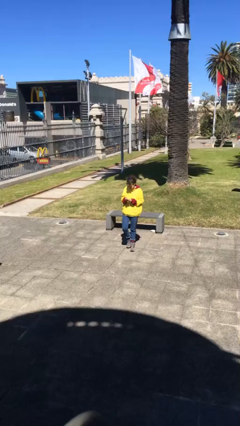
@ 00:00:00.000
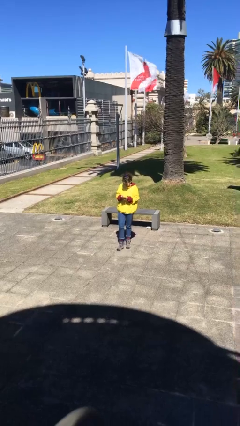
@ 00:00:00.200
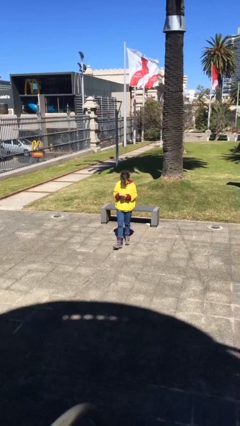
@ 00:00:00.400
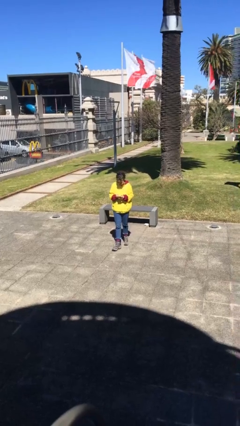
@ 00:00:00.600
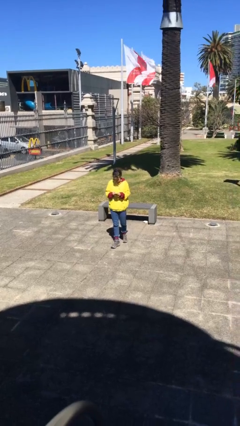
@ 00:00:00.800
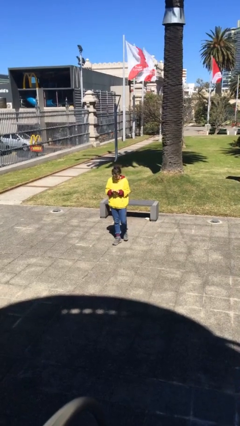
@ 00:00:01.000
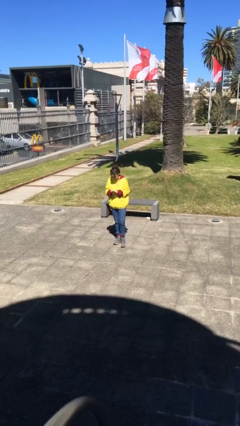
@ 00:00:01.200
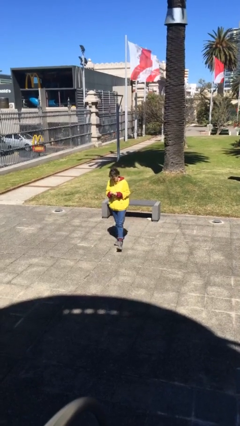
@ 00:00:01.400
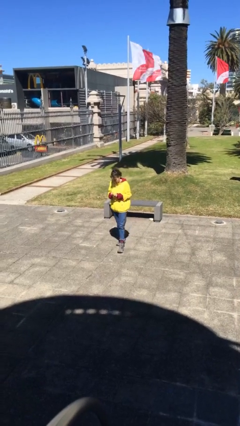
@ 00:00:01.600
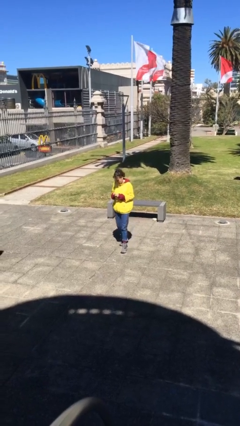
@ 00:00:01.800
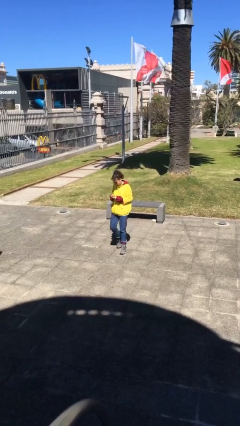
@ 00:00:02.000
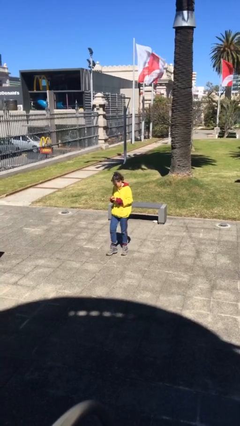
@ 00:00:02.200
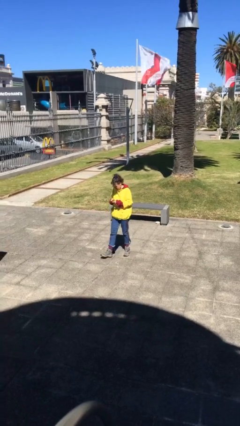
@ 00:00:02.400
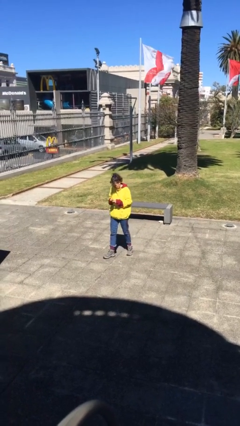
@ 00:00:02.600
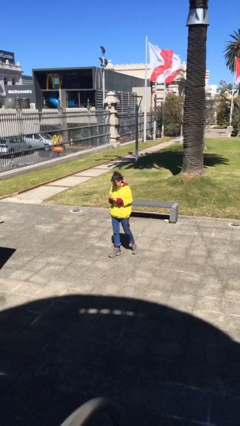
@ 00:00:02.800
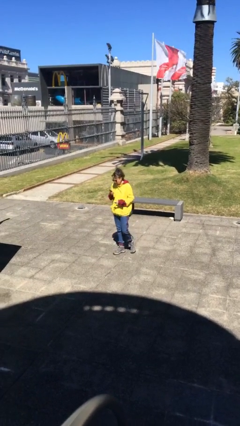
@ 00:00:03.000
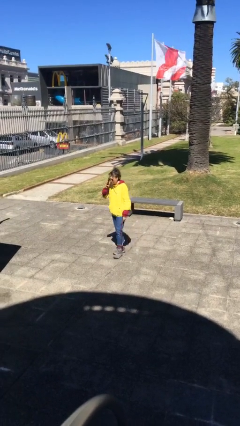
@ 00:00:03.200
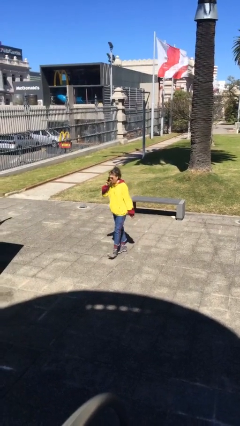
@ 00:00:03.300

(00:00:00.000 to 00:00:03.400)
person texts on phone

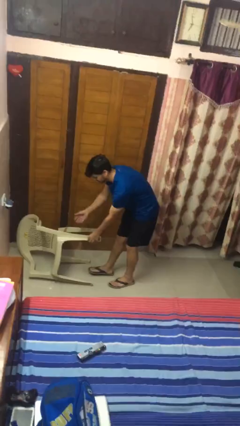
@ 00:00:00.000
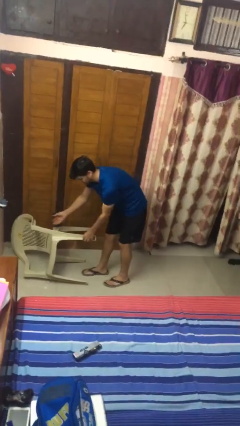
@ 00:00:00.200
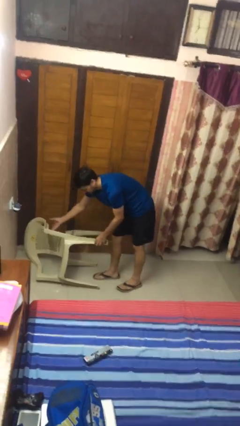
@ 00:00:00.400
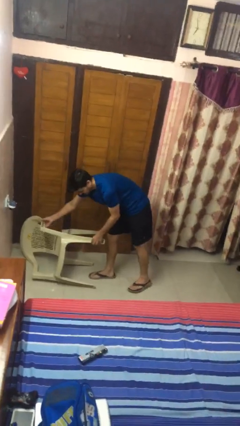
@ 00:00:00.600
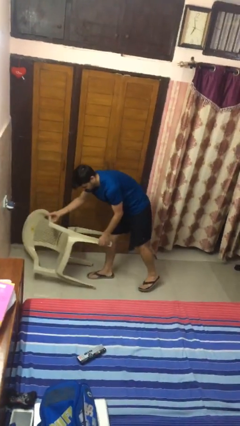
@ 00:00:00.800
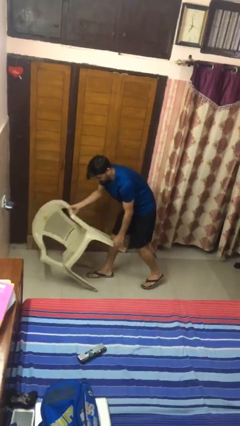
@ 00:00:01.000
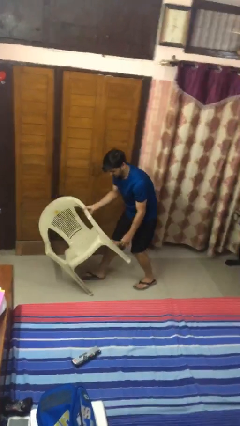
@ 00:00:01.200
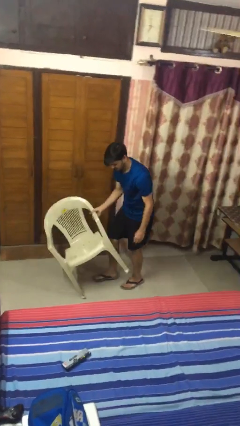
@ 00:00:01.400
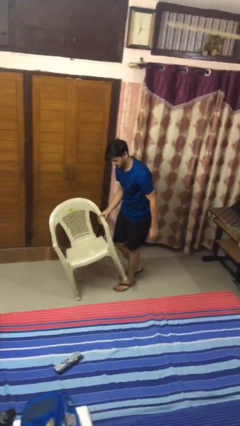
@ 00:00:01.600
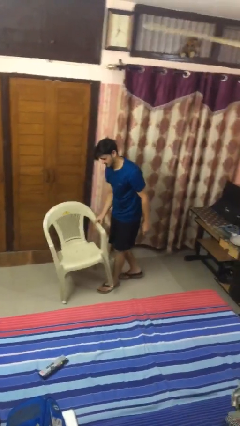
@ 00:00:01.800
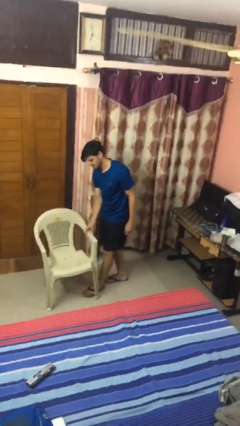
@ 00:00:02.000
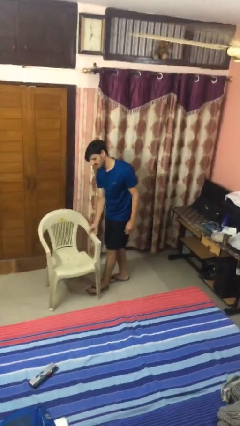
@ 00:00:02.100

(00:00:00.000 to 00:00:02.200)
person sets upright furniture

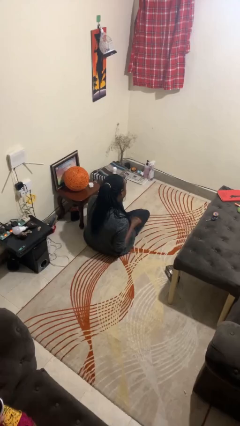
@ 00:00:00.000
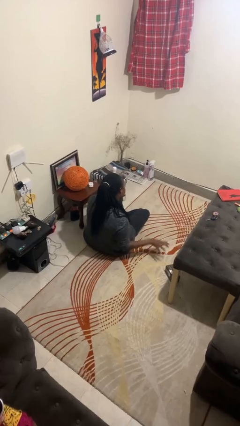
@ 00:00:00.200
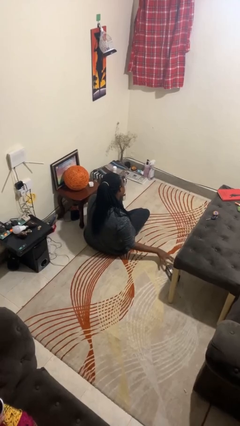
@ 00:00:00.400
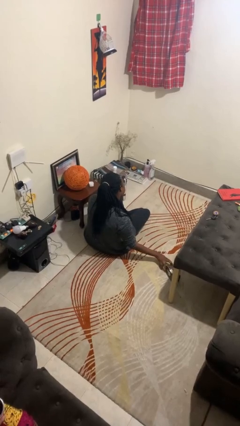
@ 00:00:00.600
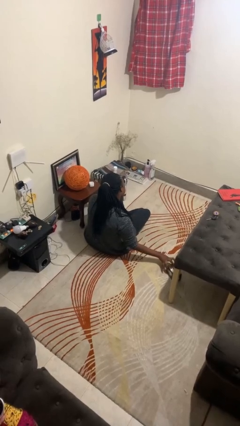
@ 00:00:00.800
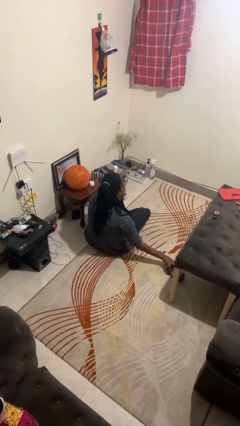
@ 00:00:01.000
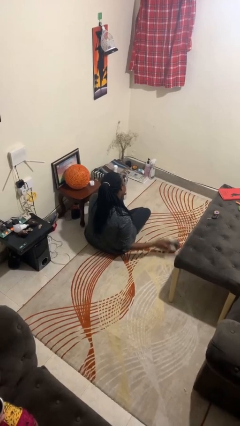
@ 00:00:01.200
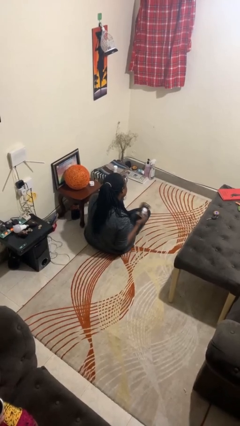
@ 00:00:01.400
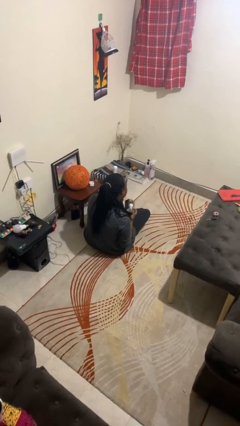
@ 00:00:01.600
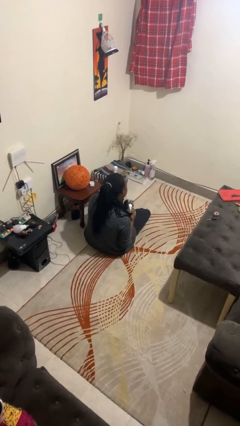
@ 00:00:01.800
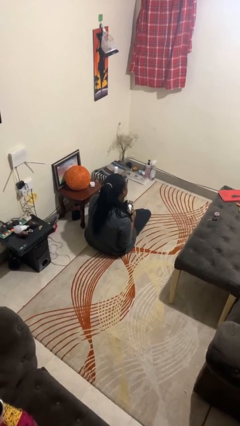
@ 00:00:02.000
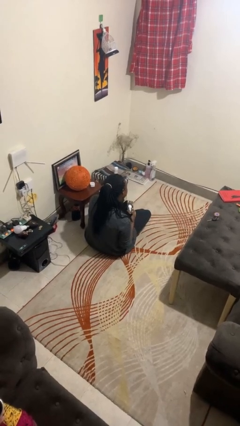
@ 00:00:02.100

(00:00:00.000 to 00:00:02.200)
person picks up object from floor

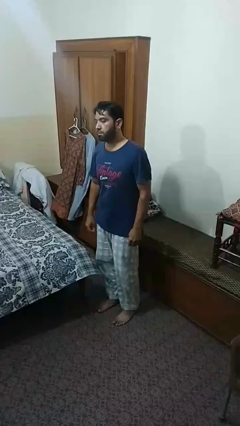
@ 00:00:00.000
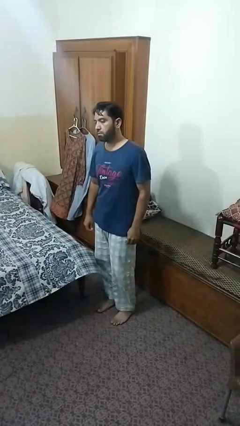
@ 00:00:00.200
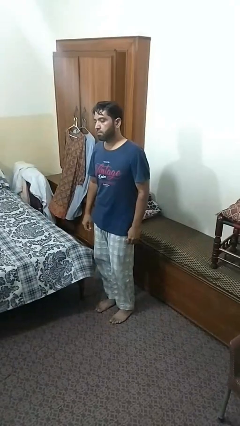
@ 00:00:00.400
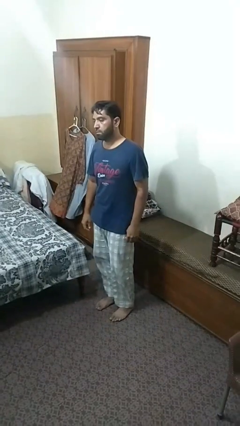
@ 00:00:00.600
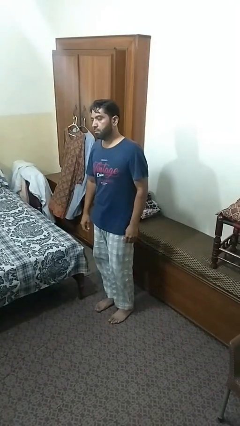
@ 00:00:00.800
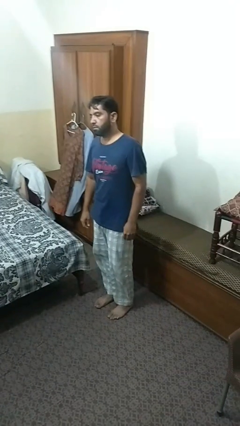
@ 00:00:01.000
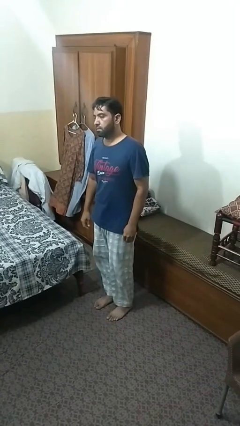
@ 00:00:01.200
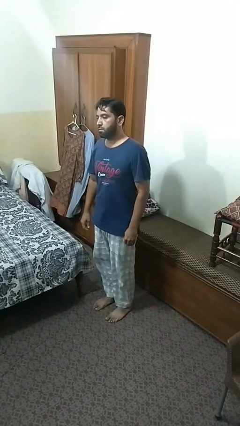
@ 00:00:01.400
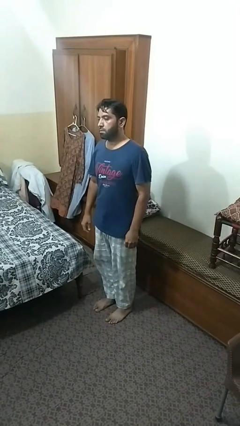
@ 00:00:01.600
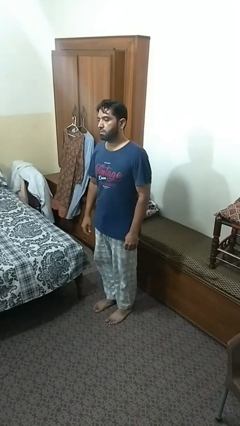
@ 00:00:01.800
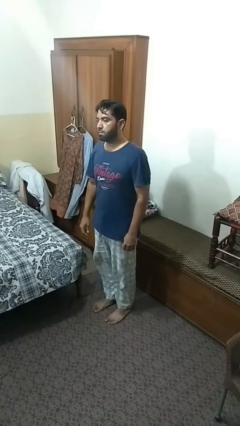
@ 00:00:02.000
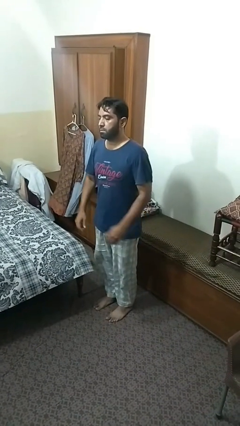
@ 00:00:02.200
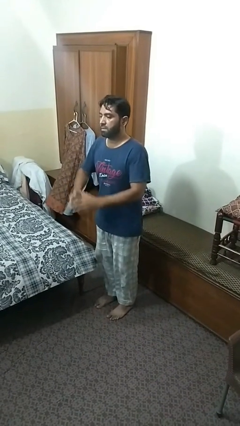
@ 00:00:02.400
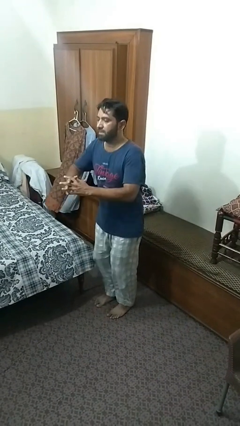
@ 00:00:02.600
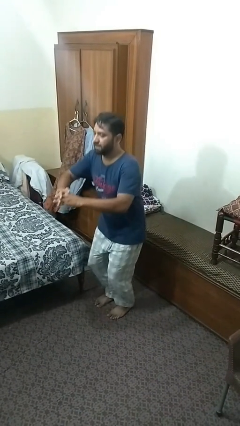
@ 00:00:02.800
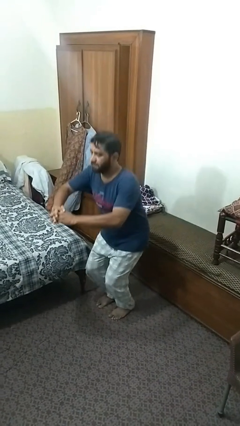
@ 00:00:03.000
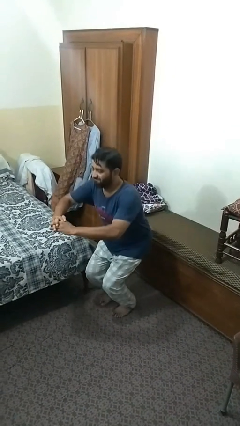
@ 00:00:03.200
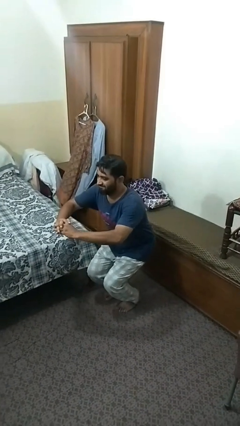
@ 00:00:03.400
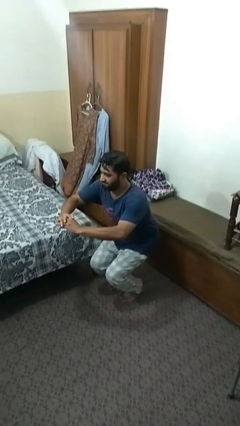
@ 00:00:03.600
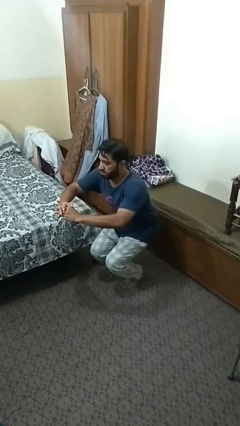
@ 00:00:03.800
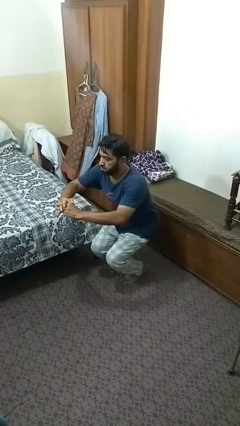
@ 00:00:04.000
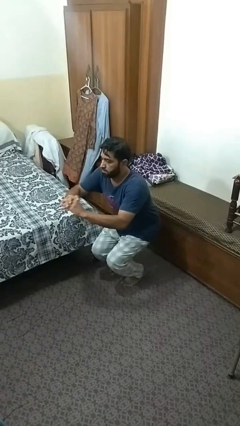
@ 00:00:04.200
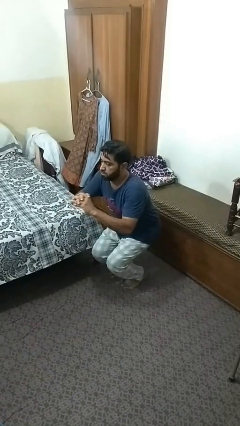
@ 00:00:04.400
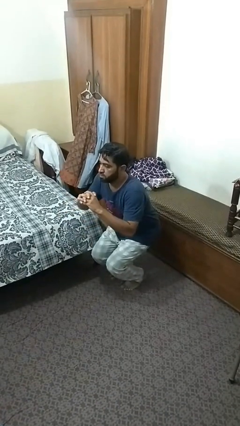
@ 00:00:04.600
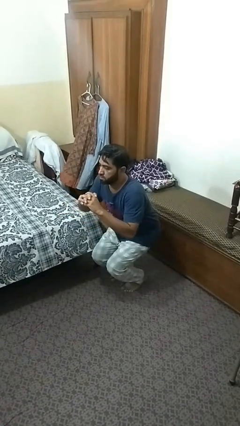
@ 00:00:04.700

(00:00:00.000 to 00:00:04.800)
person squats

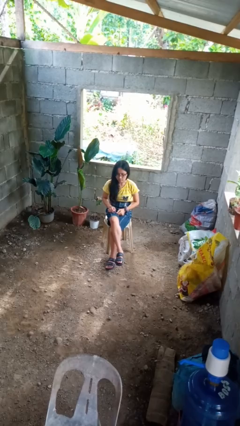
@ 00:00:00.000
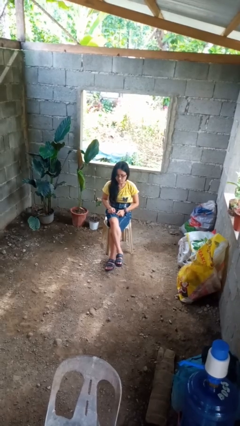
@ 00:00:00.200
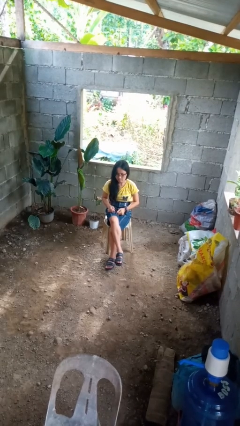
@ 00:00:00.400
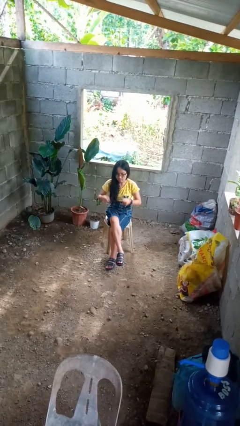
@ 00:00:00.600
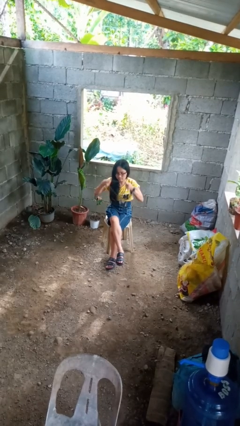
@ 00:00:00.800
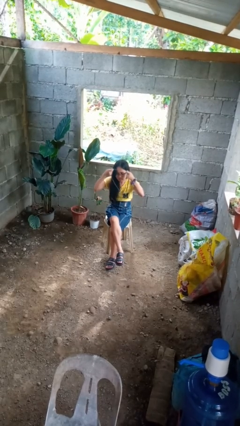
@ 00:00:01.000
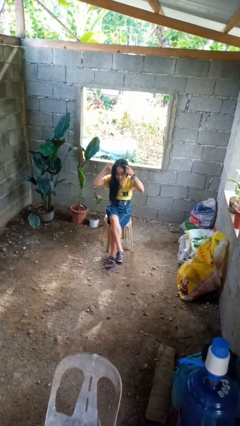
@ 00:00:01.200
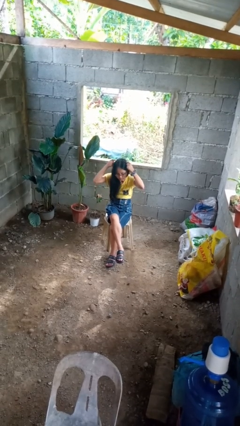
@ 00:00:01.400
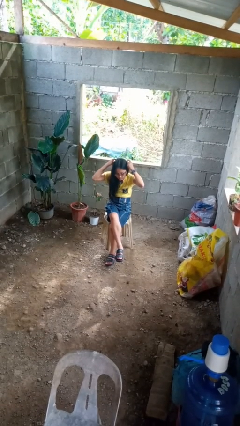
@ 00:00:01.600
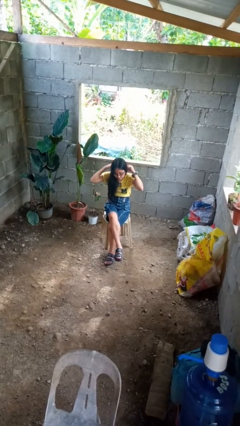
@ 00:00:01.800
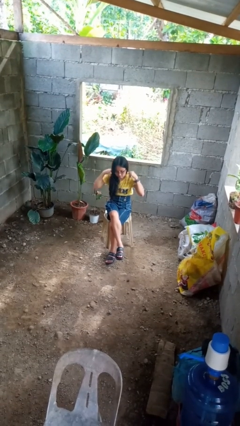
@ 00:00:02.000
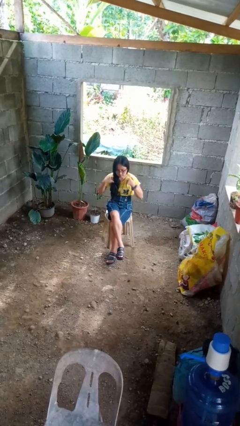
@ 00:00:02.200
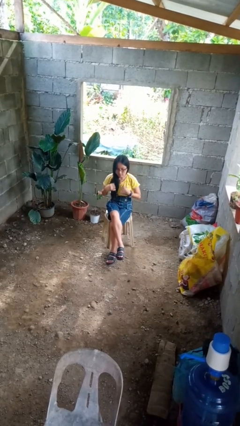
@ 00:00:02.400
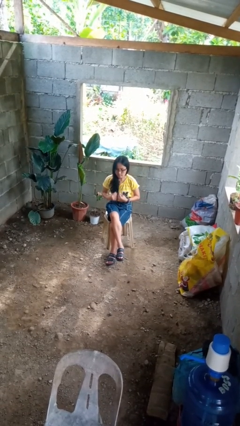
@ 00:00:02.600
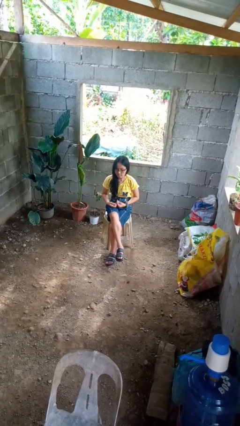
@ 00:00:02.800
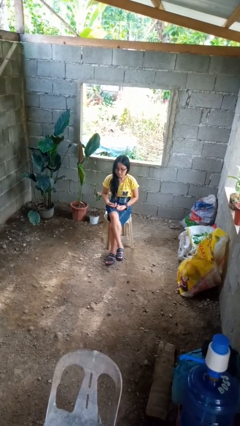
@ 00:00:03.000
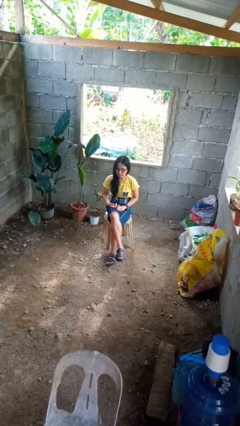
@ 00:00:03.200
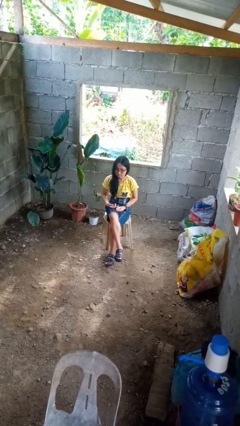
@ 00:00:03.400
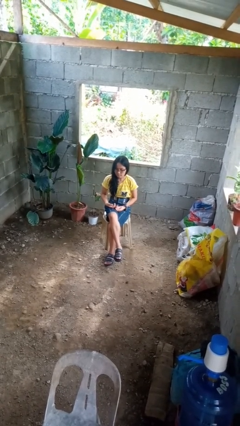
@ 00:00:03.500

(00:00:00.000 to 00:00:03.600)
person puts on necklace

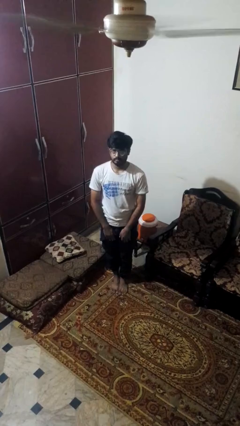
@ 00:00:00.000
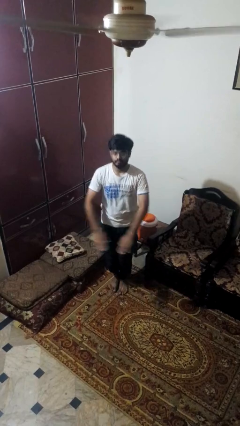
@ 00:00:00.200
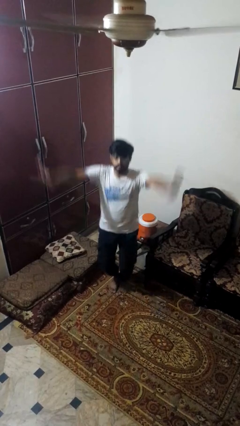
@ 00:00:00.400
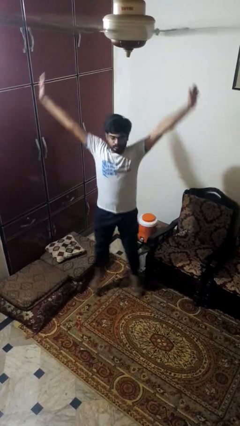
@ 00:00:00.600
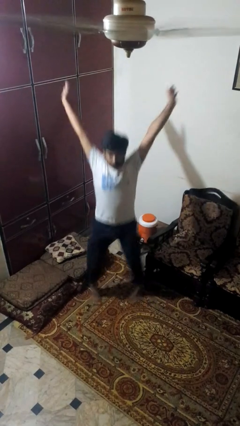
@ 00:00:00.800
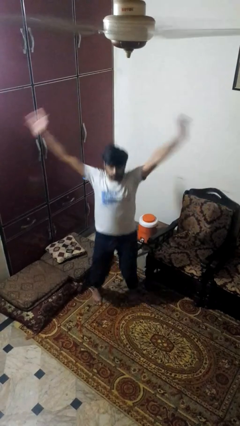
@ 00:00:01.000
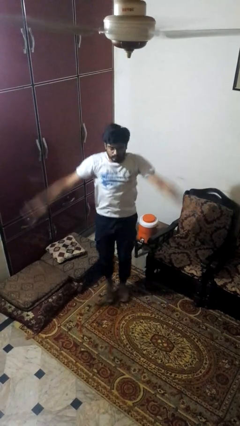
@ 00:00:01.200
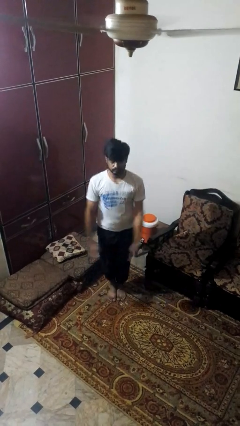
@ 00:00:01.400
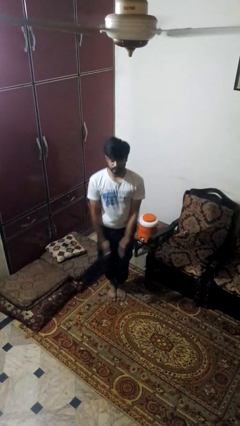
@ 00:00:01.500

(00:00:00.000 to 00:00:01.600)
person exercises with jumping jacks
